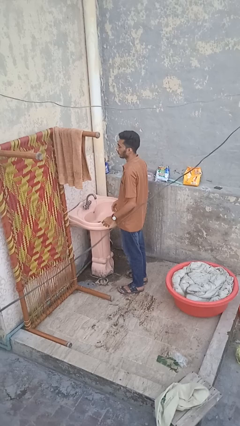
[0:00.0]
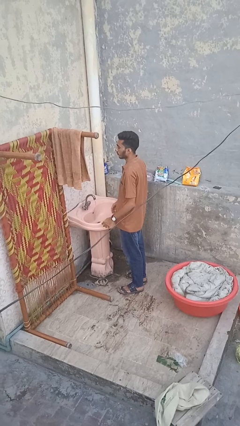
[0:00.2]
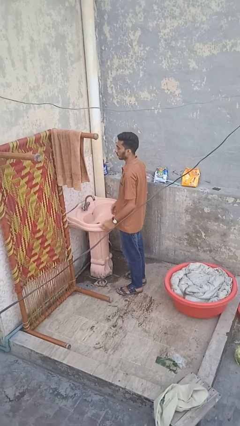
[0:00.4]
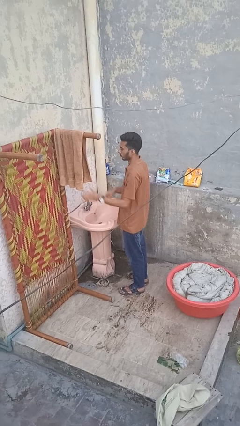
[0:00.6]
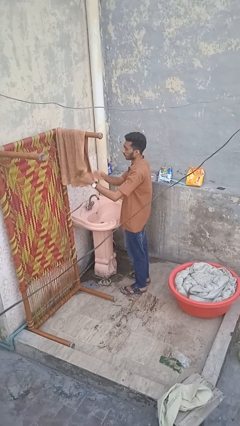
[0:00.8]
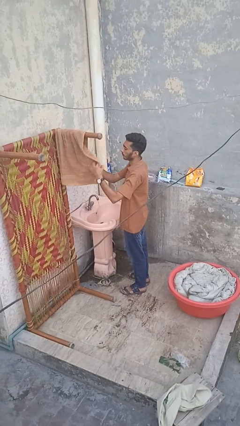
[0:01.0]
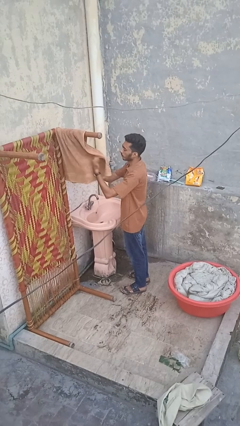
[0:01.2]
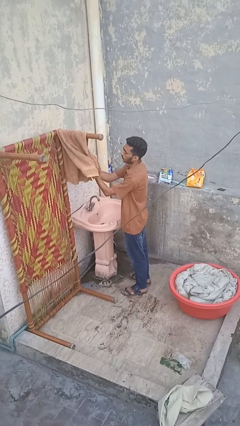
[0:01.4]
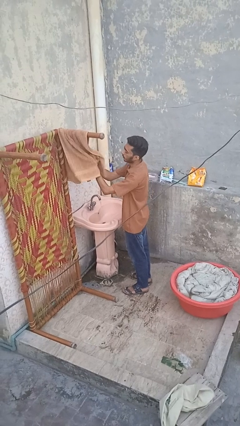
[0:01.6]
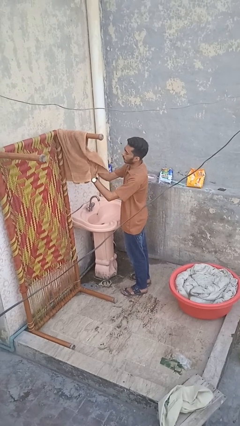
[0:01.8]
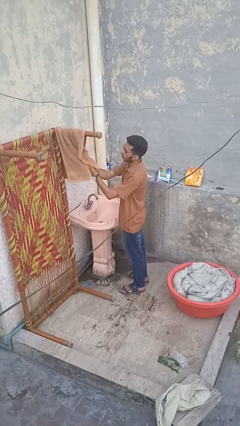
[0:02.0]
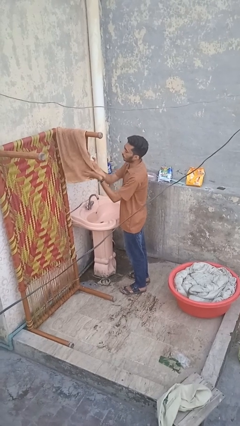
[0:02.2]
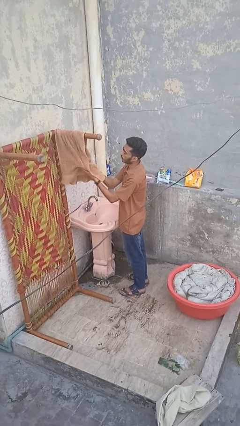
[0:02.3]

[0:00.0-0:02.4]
person dries hands with towel

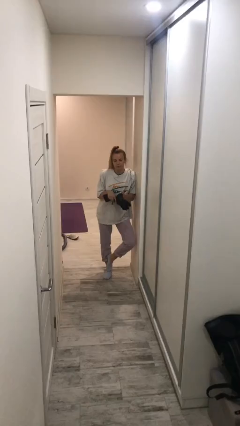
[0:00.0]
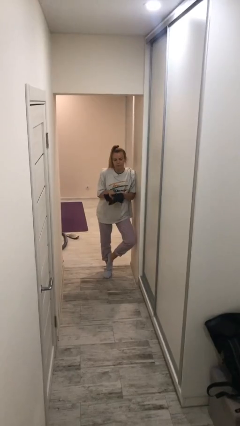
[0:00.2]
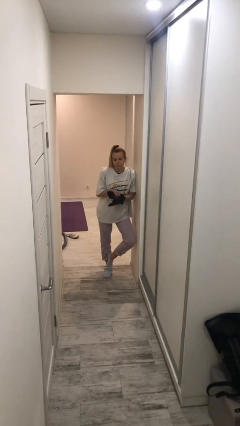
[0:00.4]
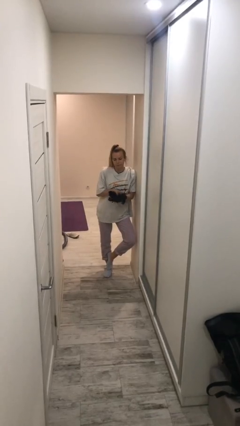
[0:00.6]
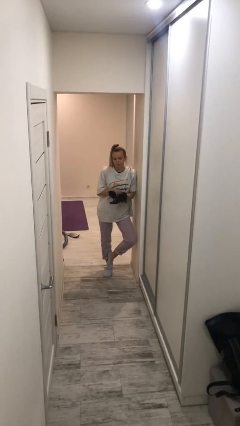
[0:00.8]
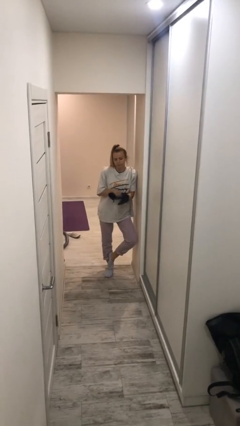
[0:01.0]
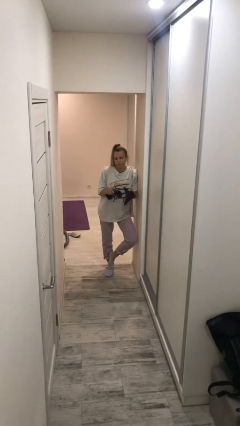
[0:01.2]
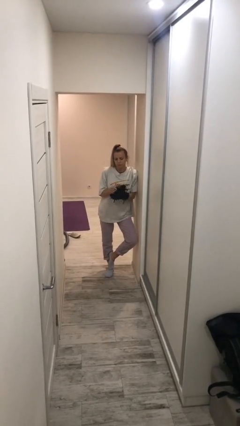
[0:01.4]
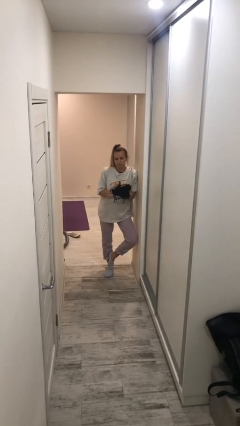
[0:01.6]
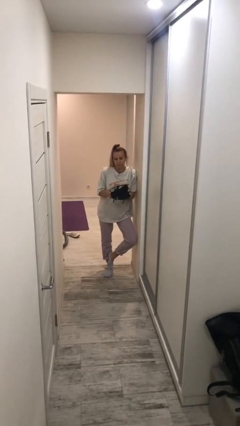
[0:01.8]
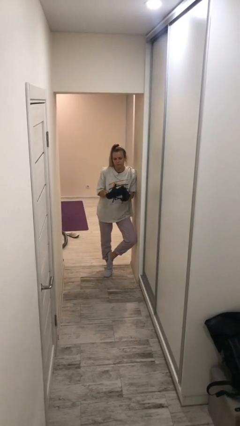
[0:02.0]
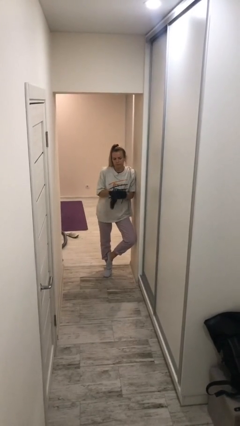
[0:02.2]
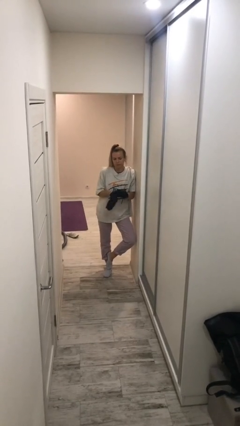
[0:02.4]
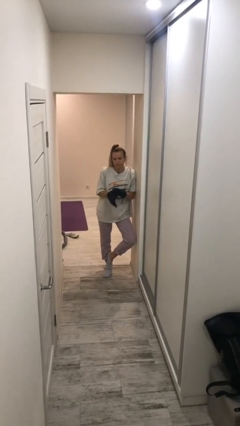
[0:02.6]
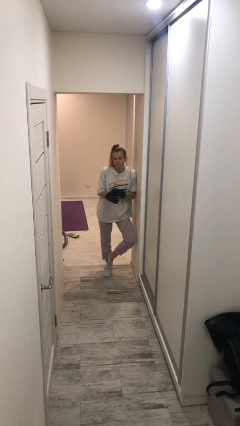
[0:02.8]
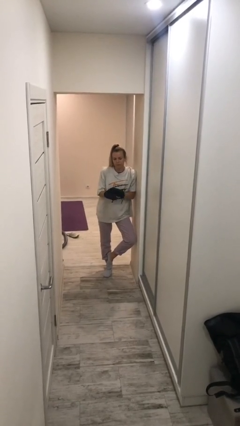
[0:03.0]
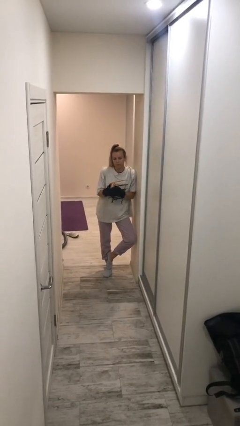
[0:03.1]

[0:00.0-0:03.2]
person puts on gloves

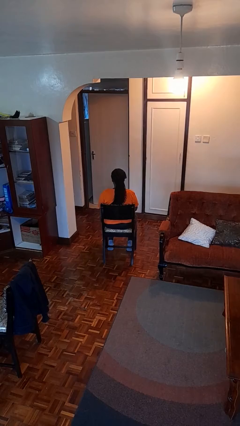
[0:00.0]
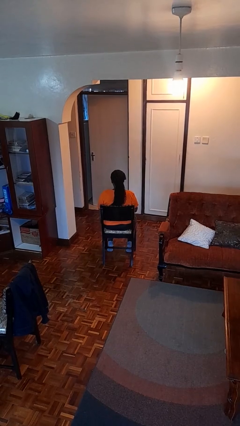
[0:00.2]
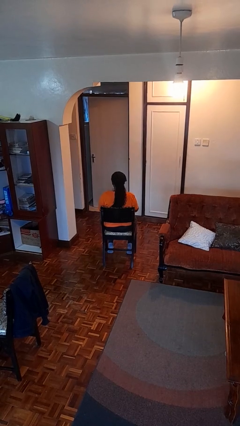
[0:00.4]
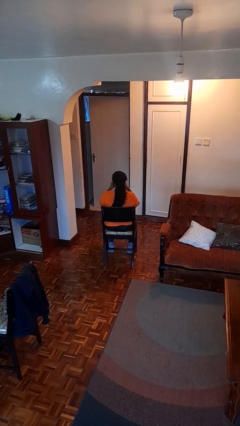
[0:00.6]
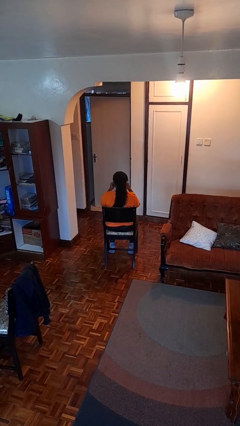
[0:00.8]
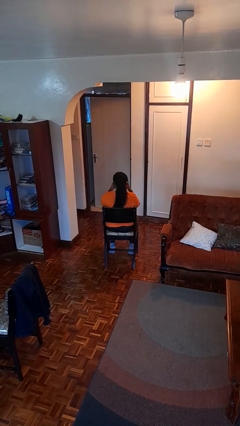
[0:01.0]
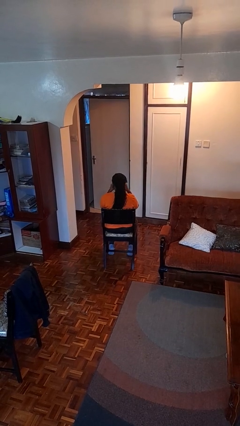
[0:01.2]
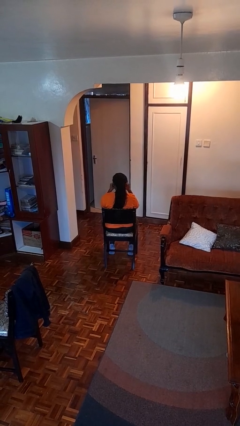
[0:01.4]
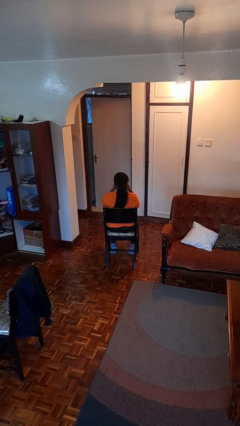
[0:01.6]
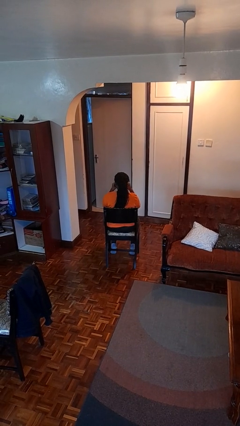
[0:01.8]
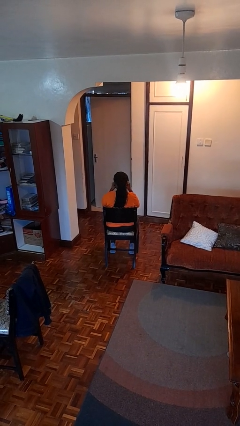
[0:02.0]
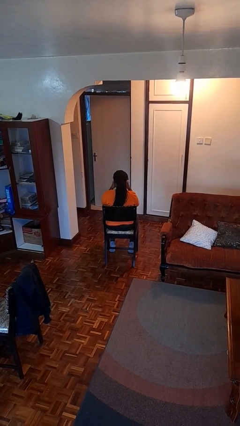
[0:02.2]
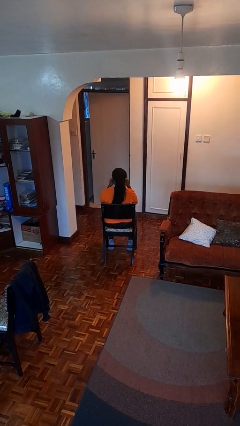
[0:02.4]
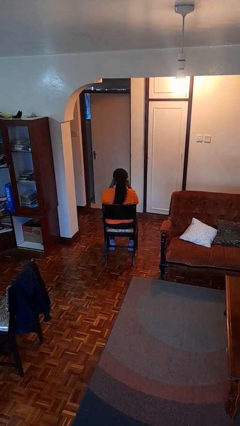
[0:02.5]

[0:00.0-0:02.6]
person rubs eyes

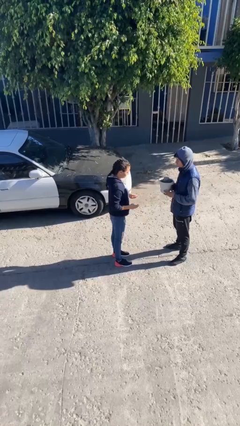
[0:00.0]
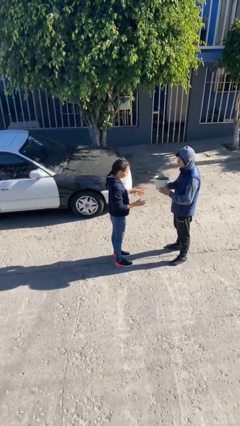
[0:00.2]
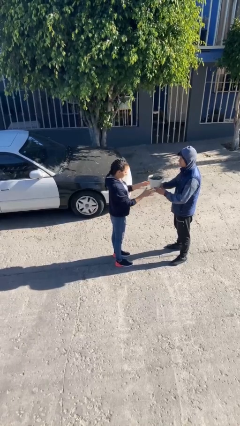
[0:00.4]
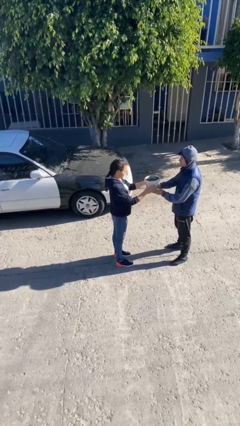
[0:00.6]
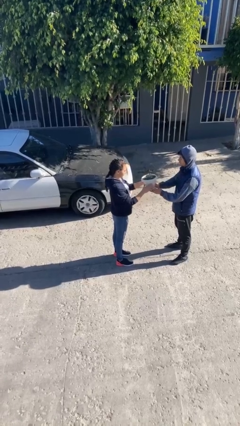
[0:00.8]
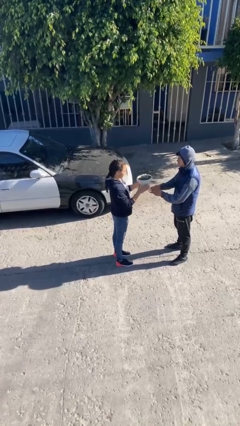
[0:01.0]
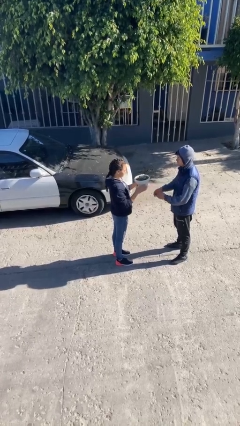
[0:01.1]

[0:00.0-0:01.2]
person transfers object to person

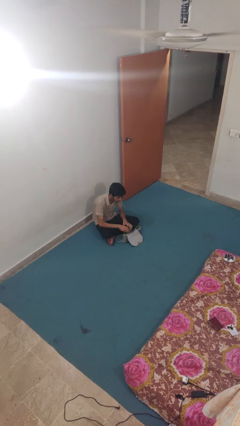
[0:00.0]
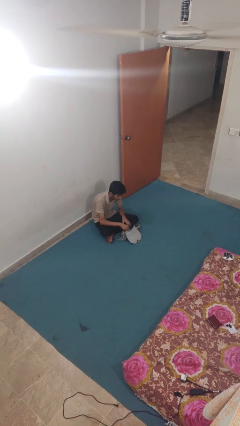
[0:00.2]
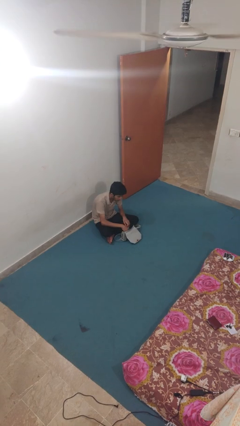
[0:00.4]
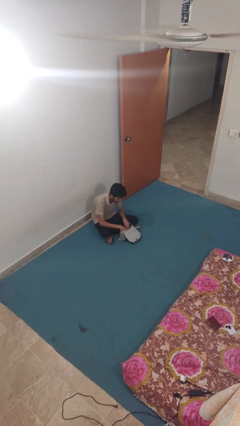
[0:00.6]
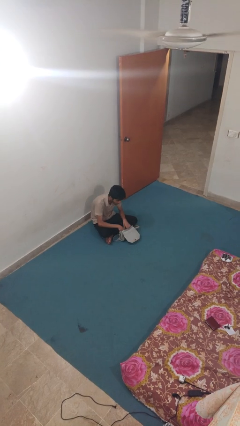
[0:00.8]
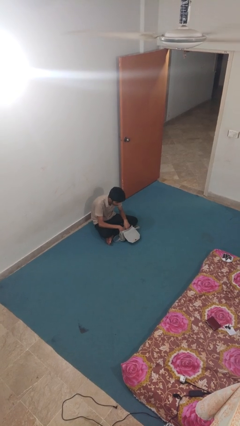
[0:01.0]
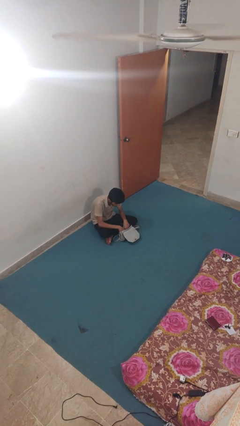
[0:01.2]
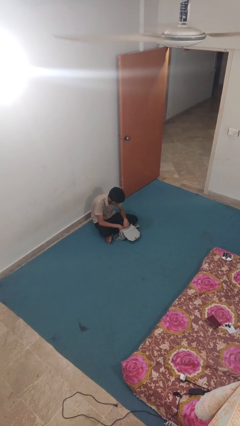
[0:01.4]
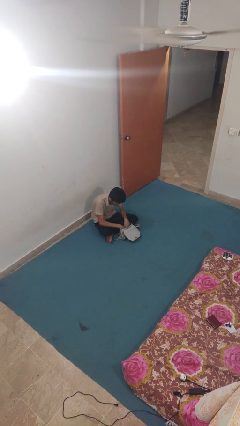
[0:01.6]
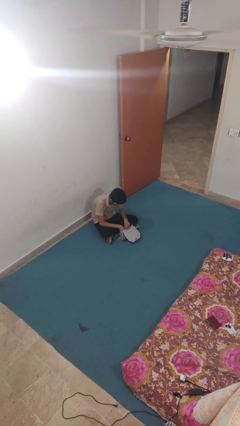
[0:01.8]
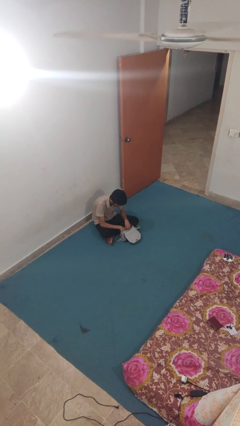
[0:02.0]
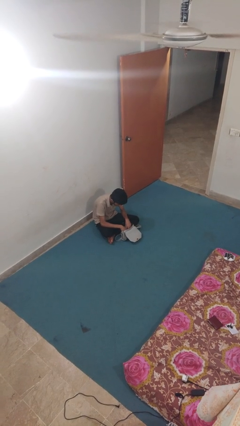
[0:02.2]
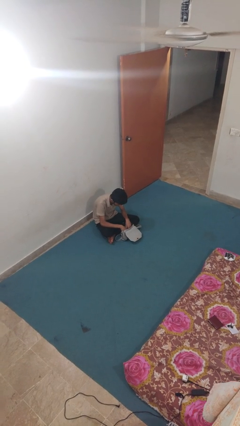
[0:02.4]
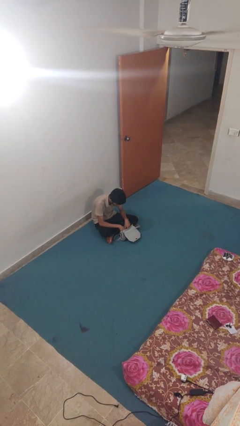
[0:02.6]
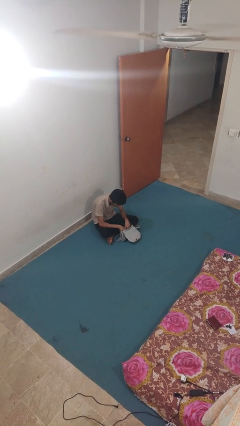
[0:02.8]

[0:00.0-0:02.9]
person searches in purse

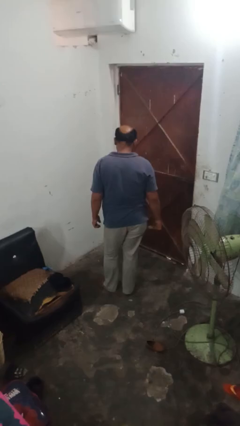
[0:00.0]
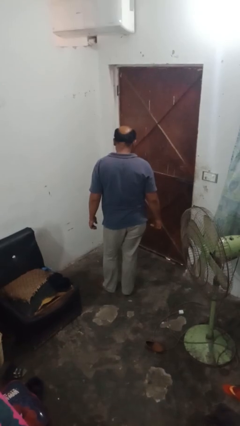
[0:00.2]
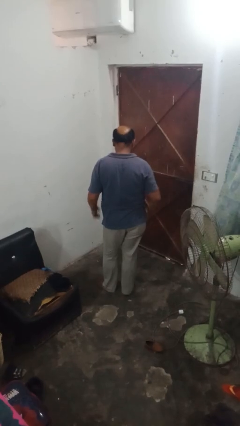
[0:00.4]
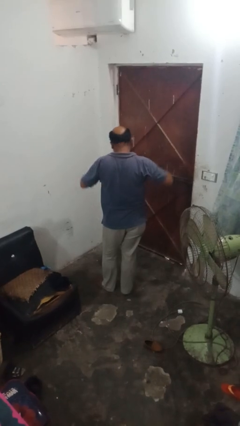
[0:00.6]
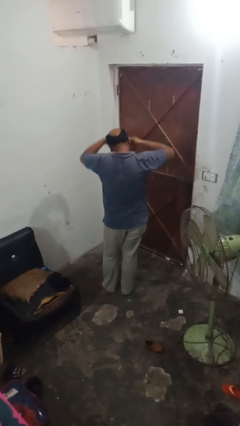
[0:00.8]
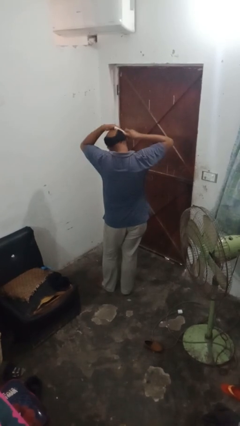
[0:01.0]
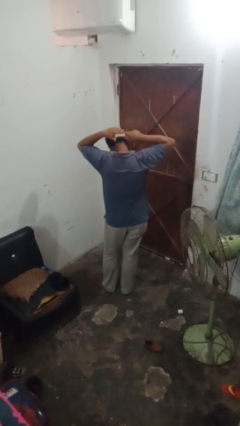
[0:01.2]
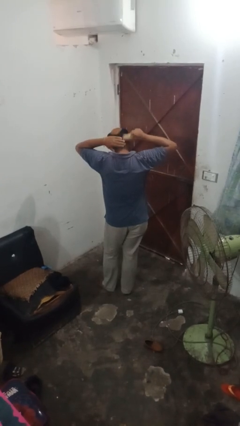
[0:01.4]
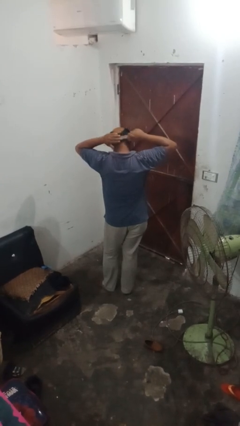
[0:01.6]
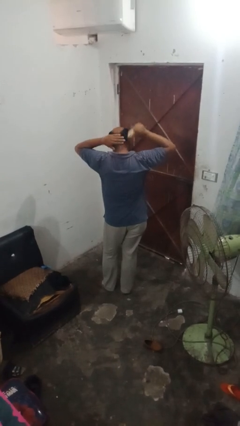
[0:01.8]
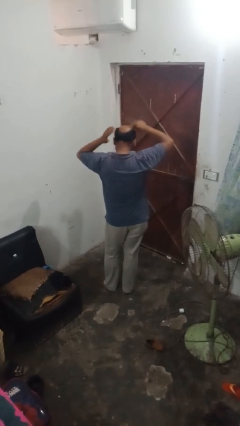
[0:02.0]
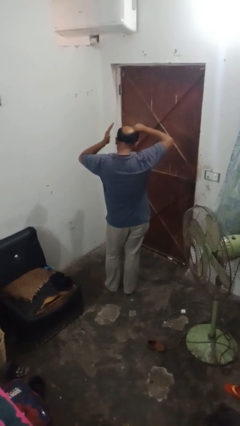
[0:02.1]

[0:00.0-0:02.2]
person brushes hair

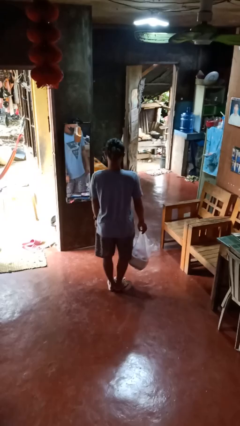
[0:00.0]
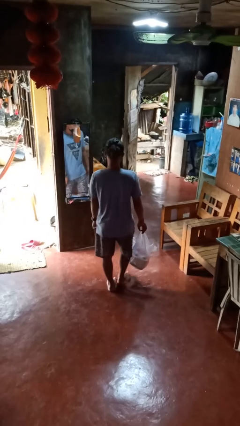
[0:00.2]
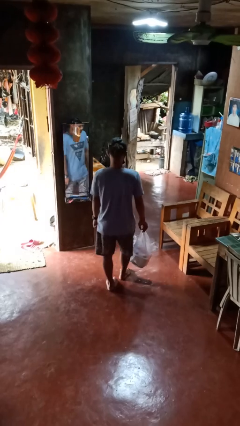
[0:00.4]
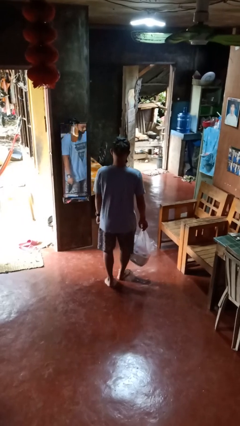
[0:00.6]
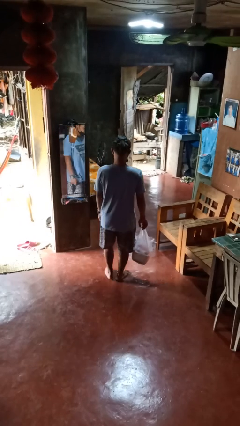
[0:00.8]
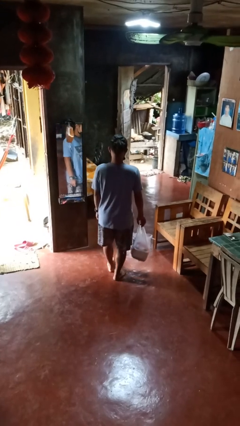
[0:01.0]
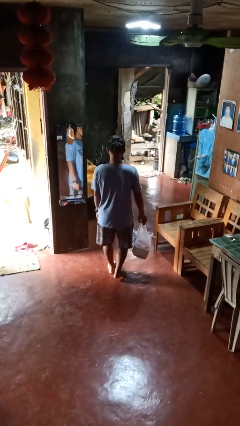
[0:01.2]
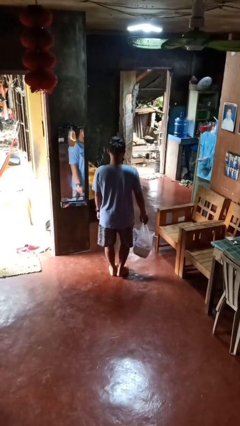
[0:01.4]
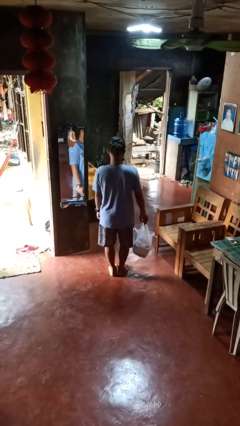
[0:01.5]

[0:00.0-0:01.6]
person carries groceries

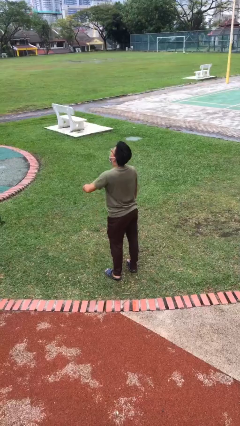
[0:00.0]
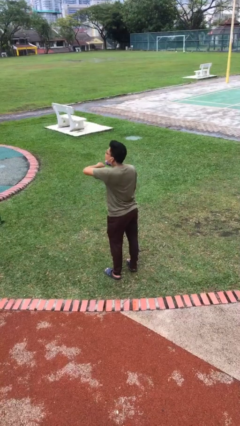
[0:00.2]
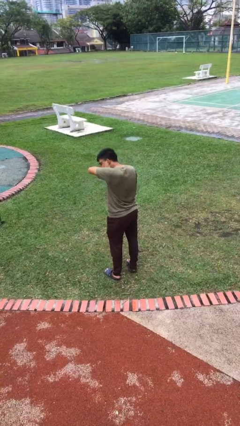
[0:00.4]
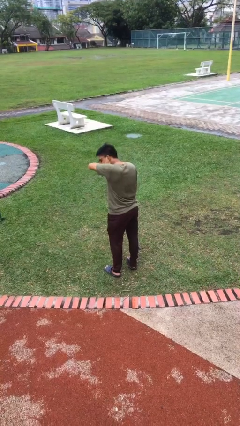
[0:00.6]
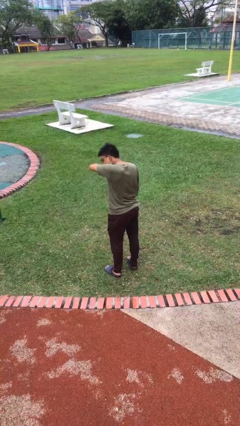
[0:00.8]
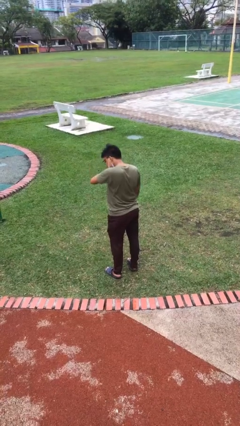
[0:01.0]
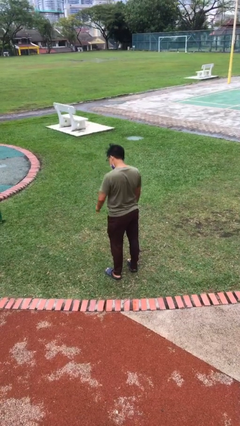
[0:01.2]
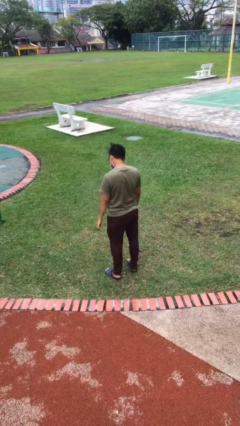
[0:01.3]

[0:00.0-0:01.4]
person sneezes into arm
